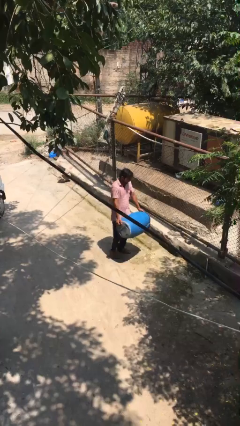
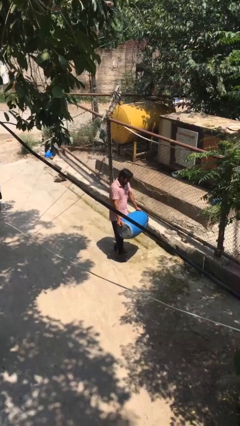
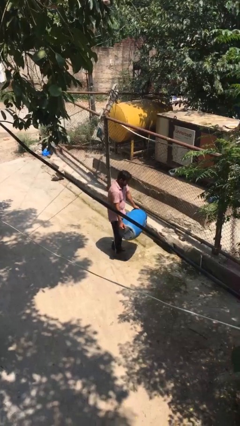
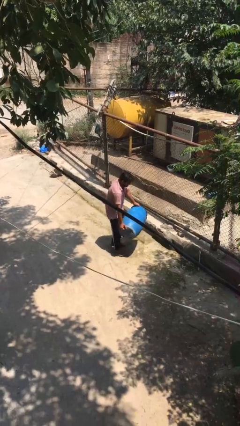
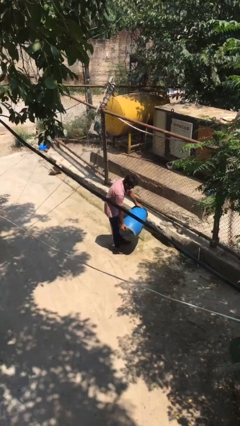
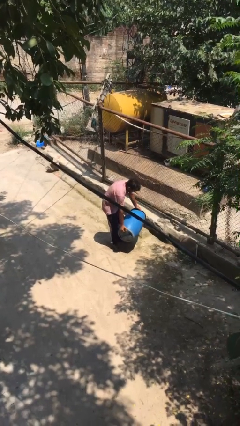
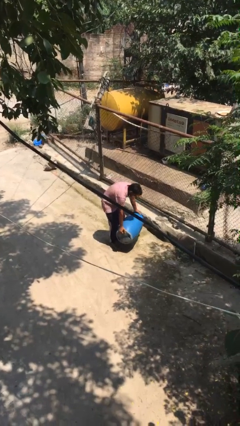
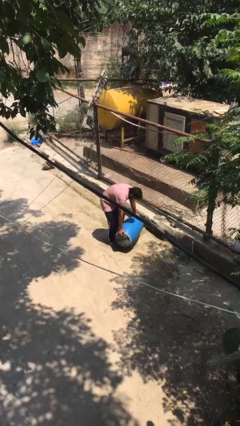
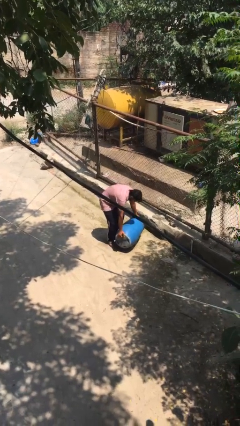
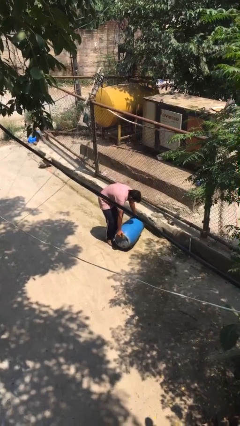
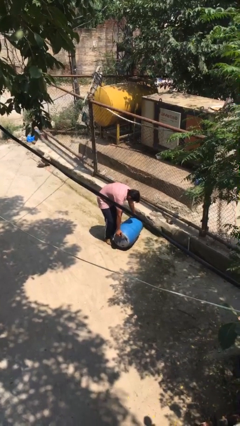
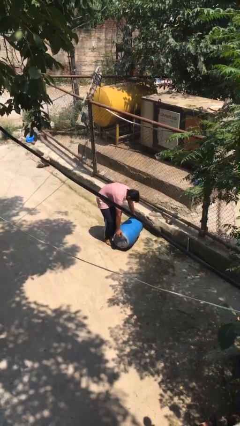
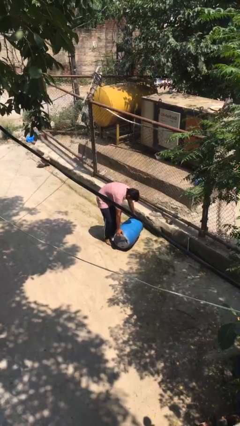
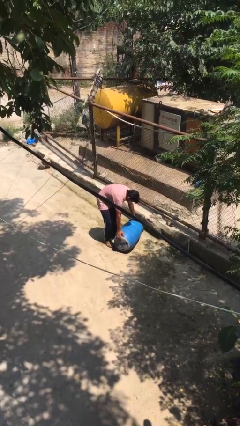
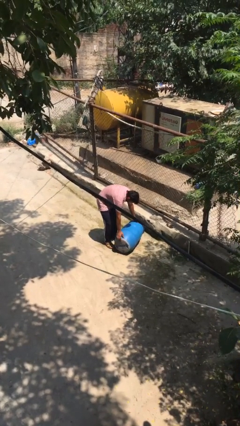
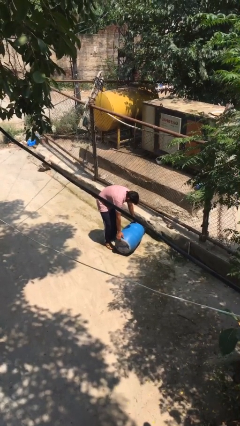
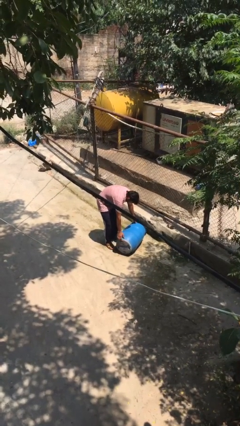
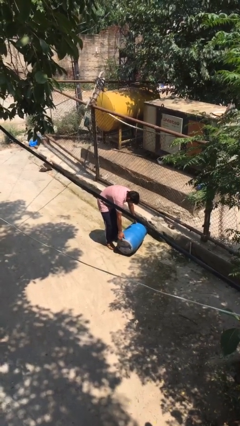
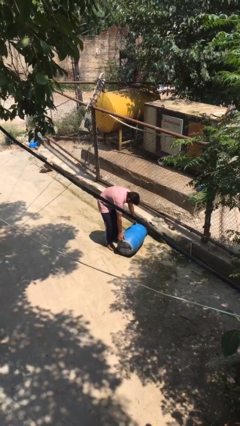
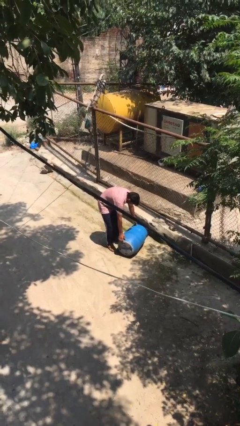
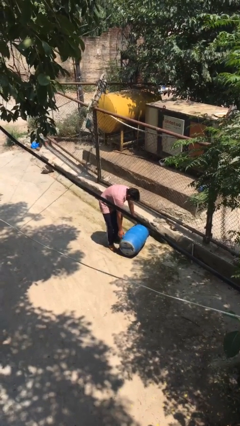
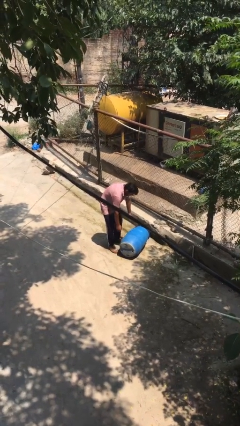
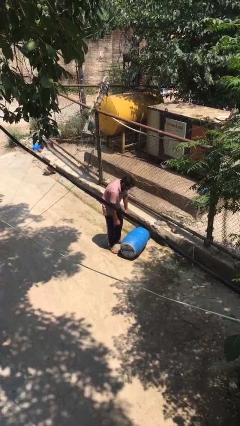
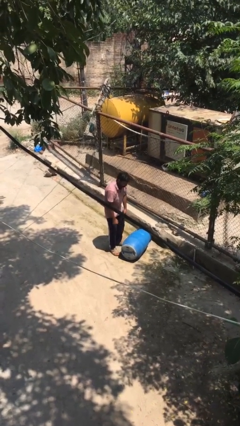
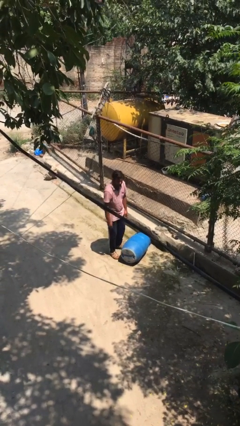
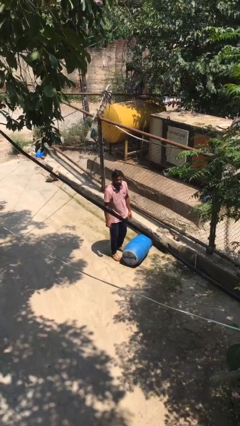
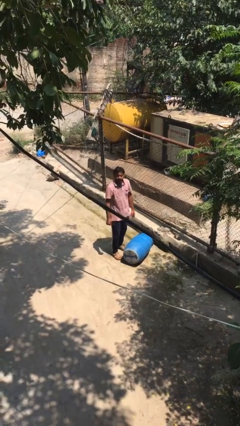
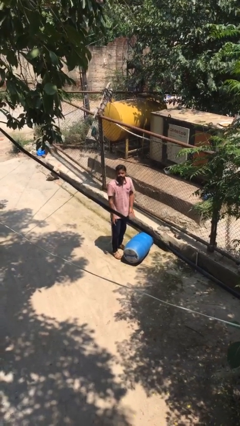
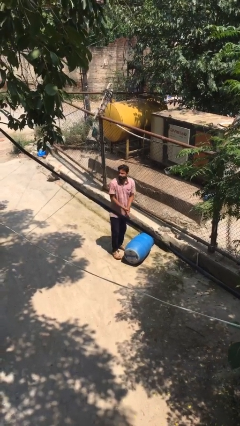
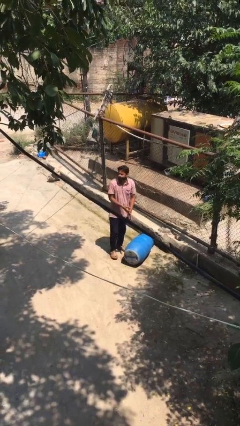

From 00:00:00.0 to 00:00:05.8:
person puts down object on floor

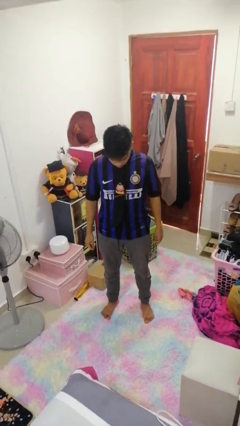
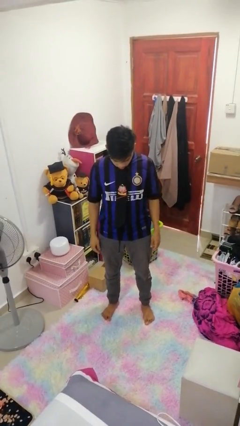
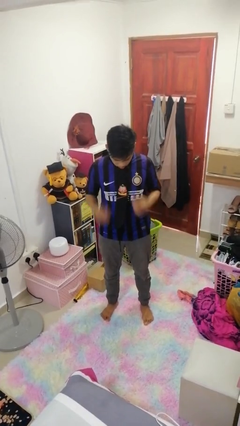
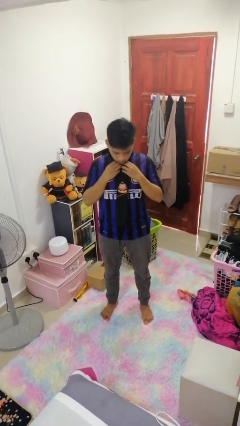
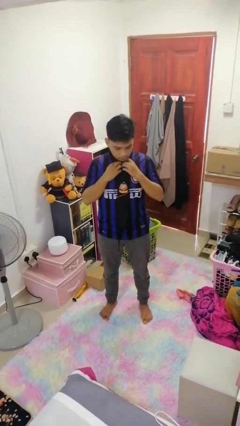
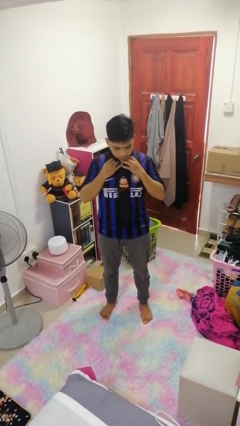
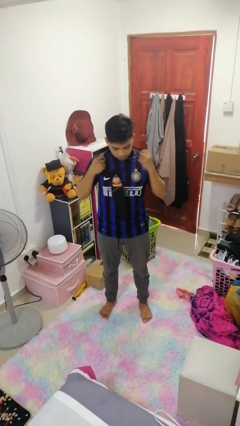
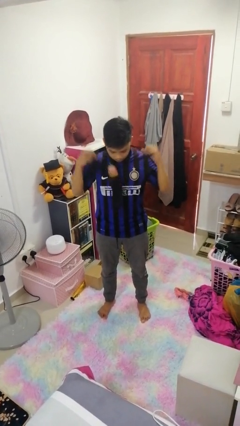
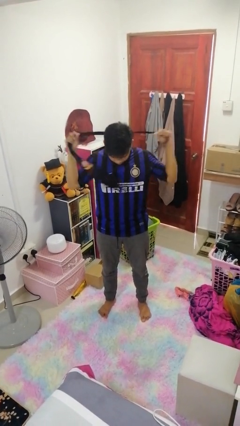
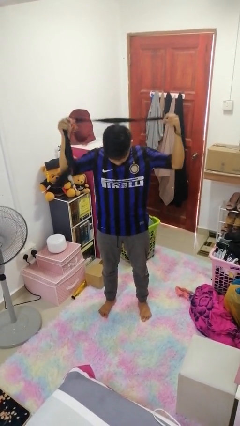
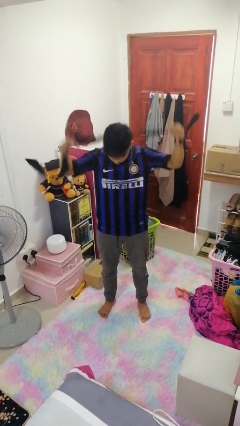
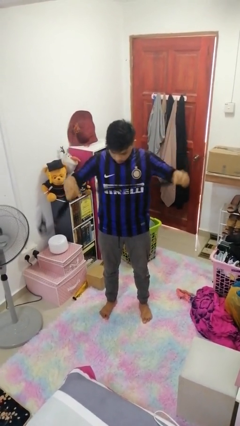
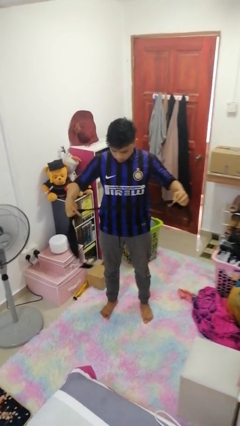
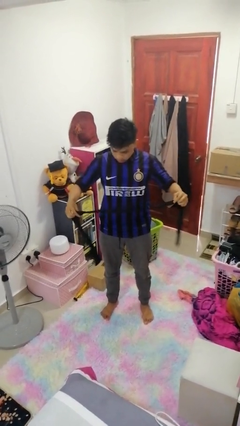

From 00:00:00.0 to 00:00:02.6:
person takes off necktie

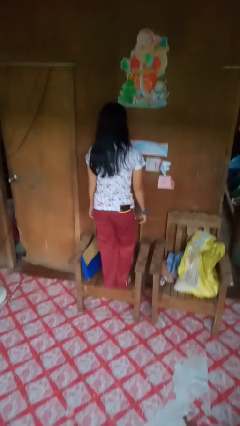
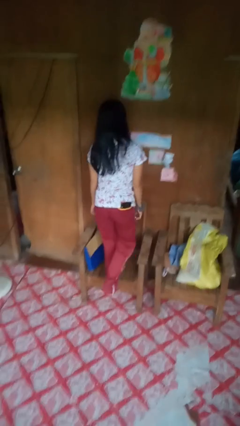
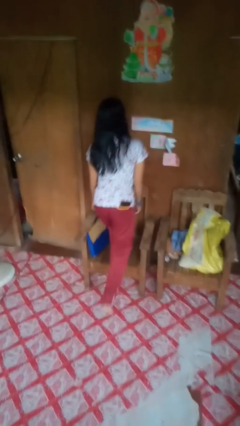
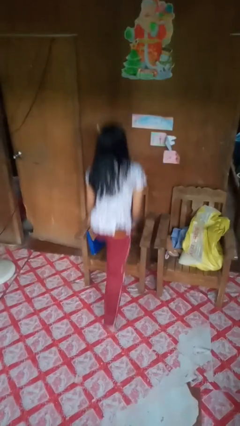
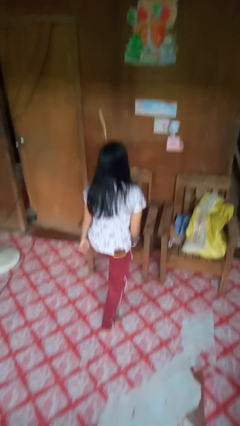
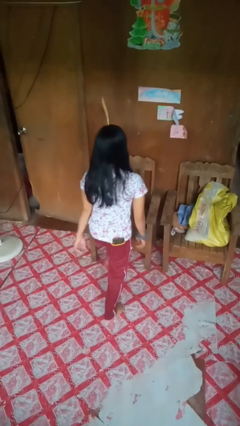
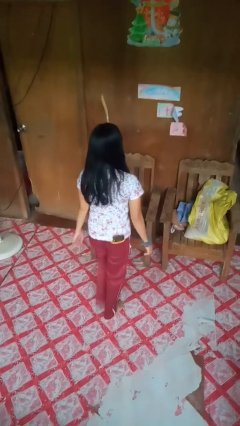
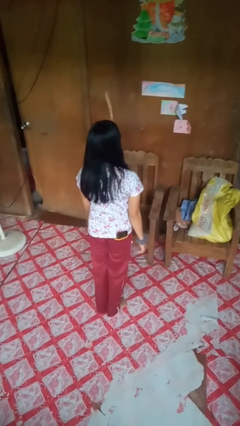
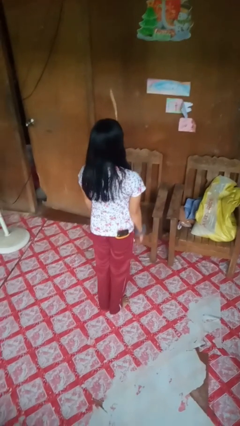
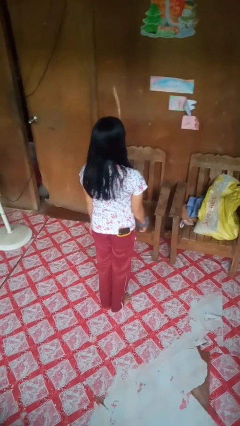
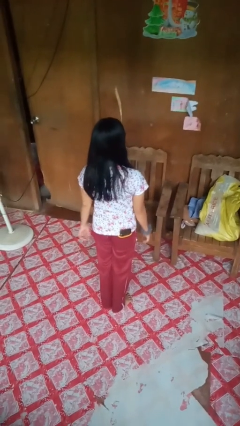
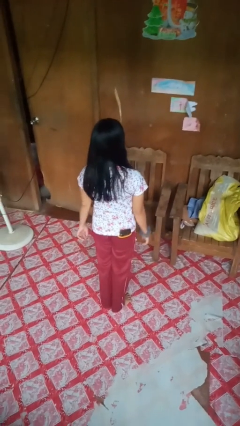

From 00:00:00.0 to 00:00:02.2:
person climbs off chair

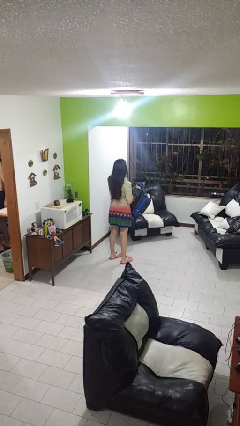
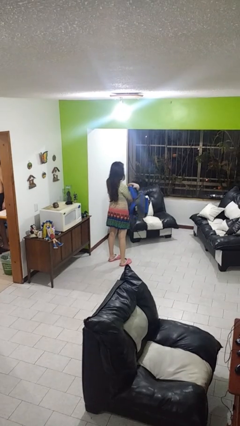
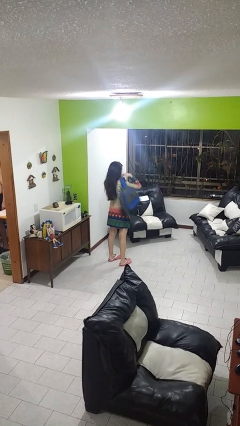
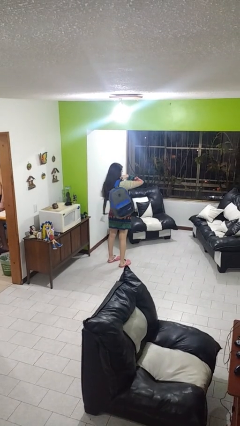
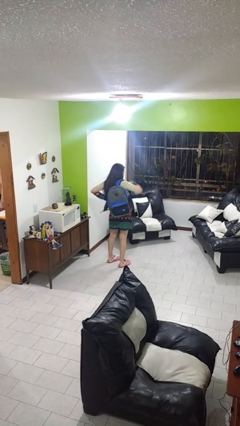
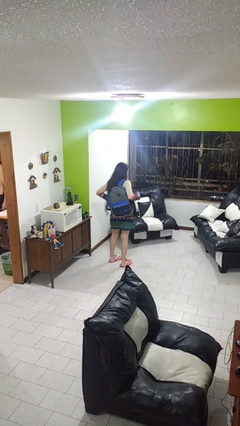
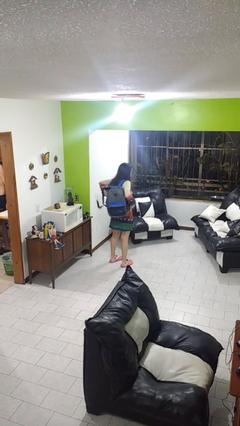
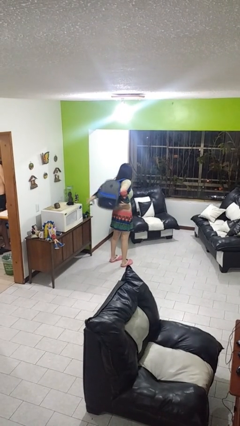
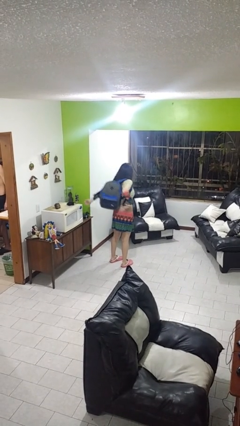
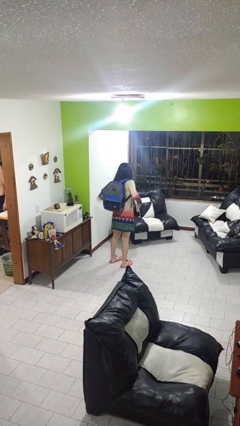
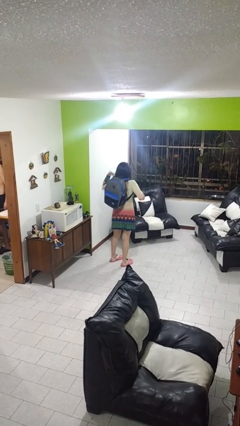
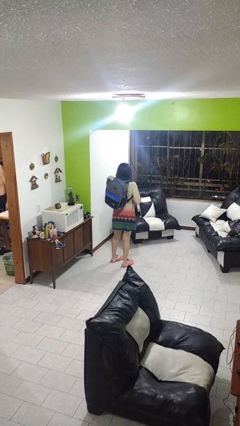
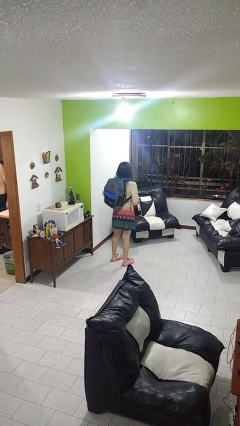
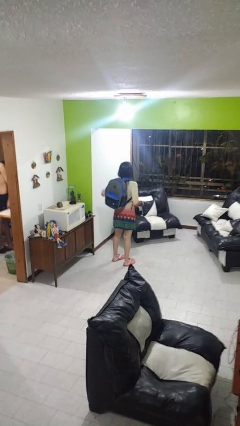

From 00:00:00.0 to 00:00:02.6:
person puts on backpack

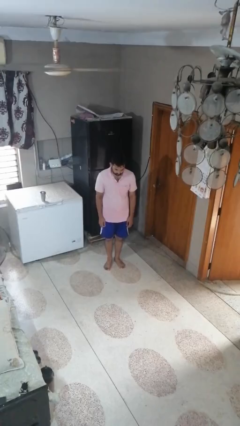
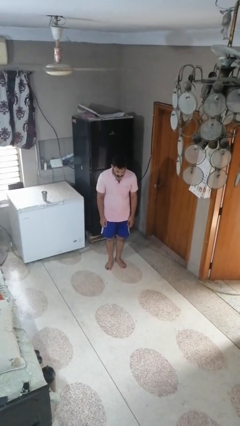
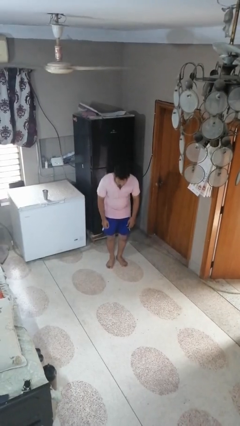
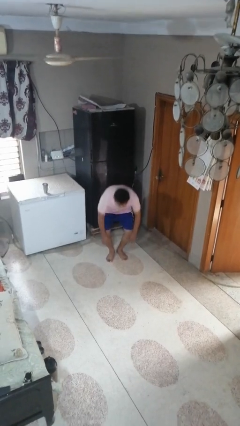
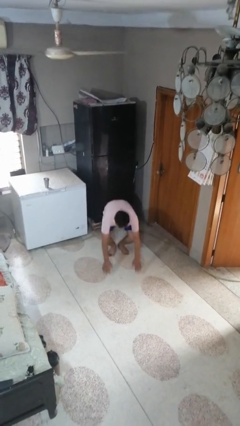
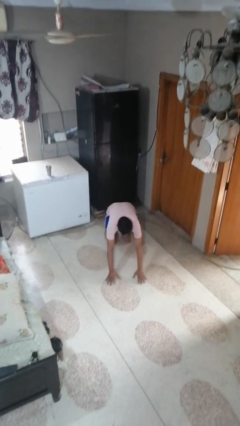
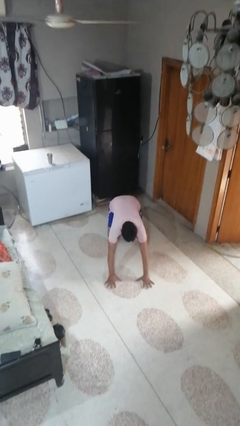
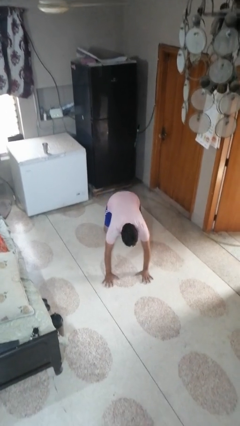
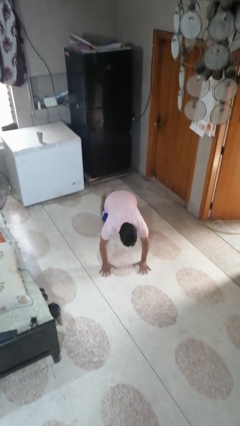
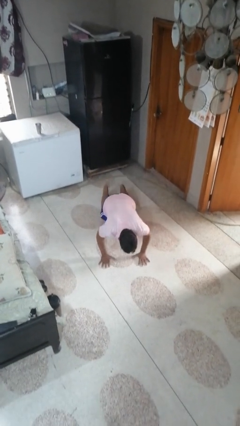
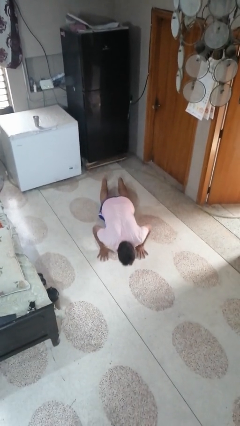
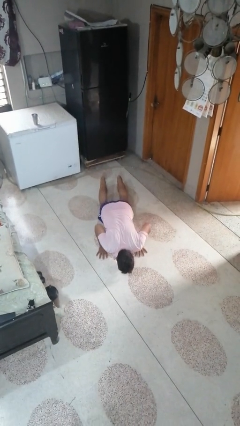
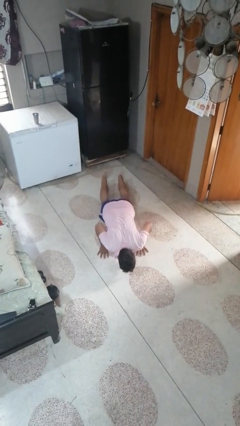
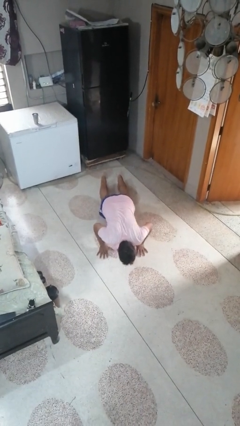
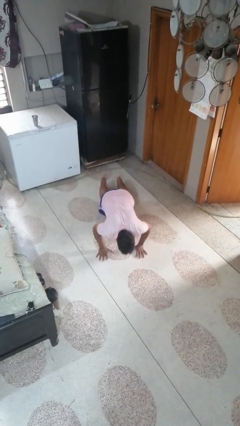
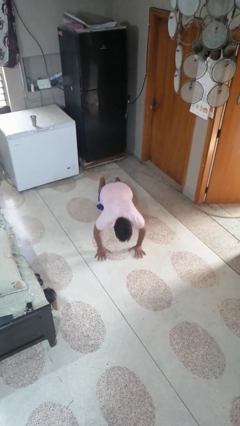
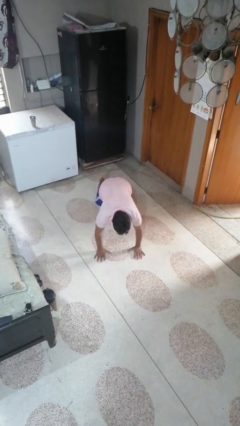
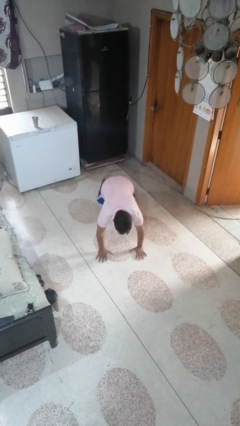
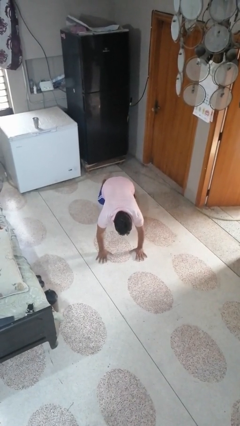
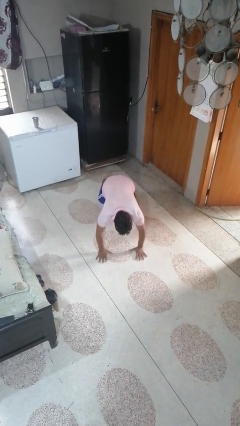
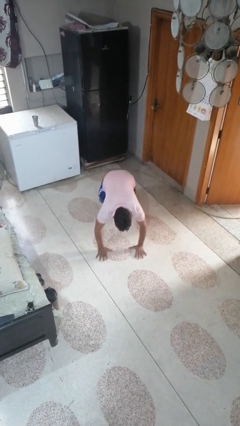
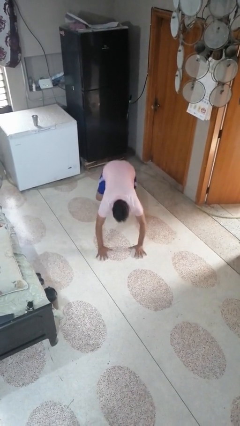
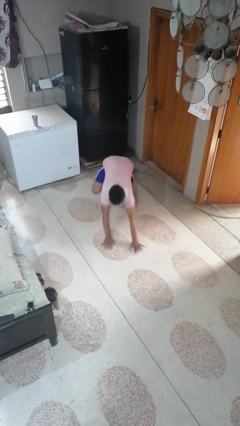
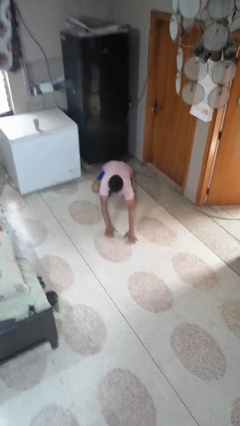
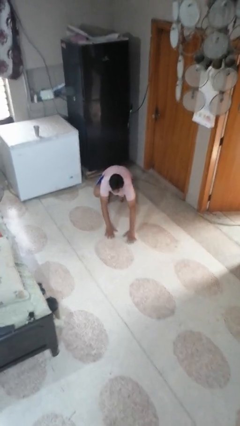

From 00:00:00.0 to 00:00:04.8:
person exercises with pushup
